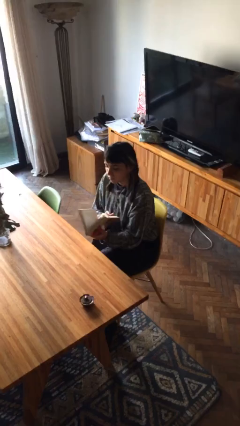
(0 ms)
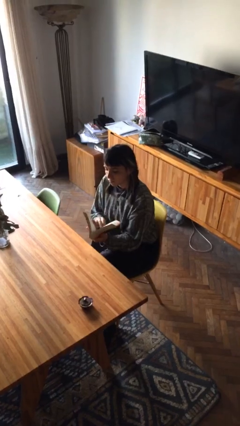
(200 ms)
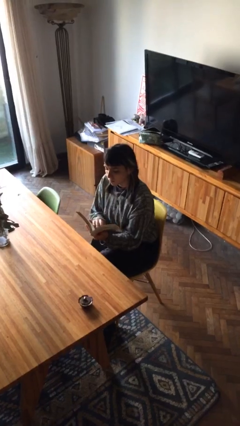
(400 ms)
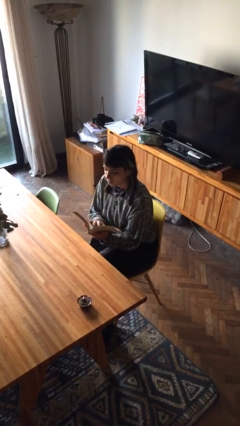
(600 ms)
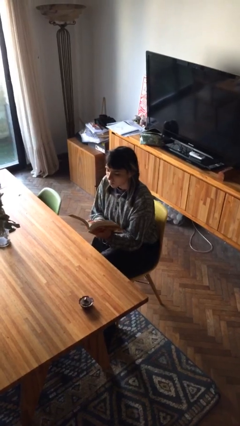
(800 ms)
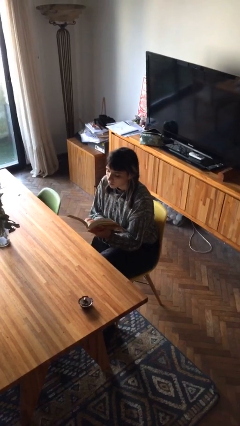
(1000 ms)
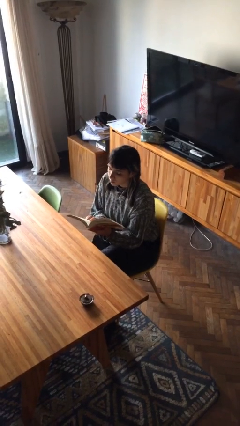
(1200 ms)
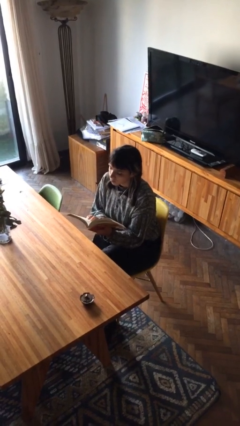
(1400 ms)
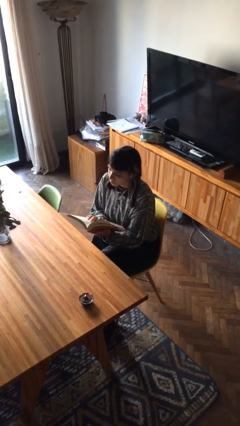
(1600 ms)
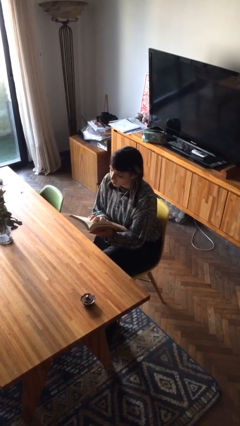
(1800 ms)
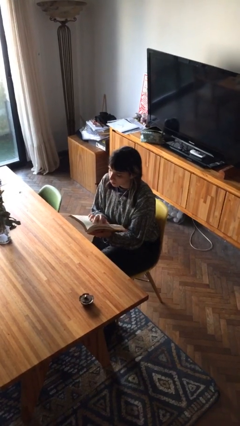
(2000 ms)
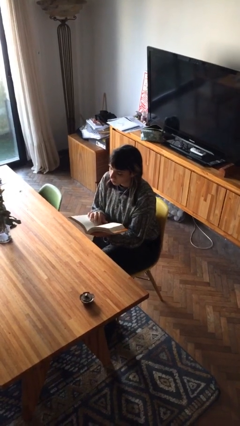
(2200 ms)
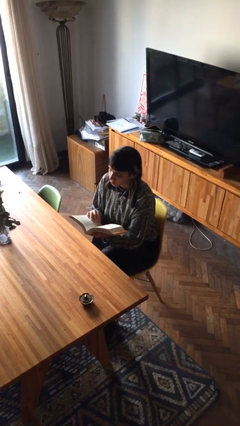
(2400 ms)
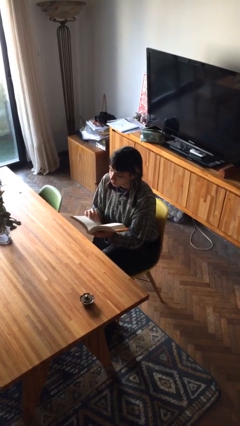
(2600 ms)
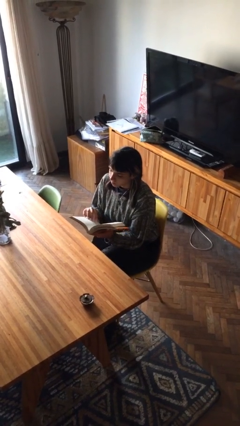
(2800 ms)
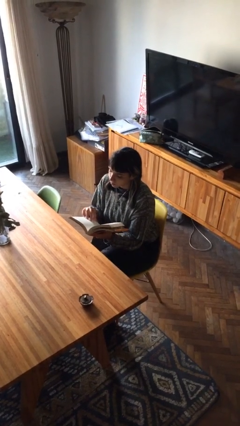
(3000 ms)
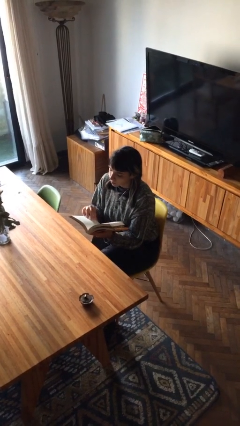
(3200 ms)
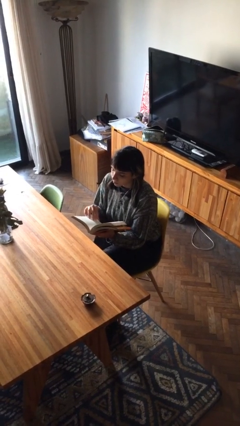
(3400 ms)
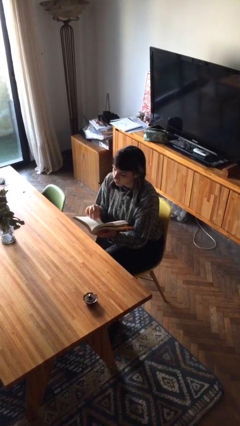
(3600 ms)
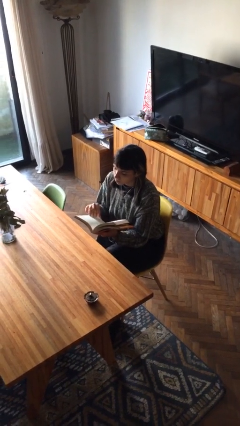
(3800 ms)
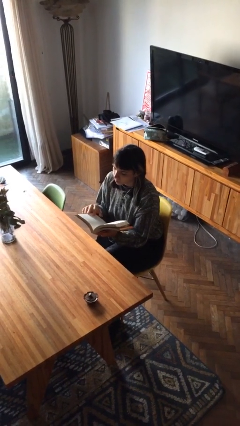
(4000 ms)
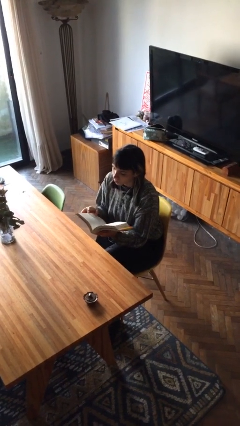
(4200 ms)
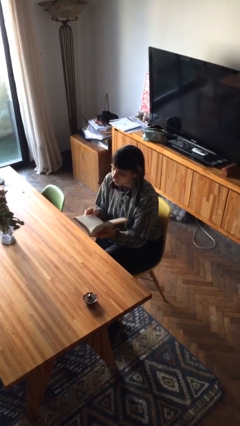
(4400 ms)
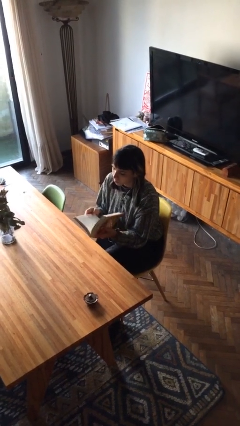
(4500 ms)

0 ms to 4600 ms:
person reads document

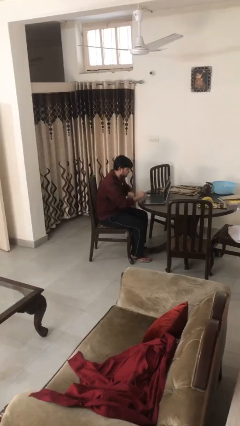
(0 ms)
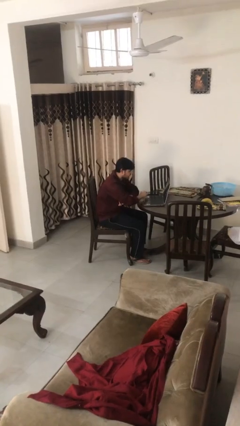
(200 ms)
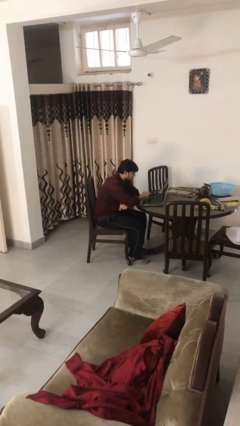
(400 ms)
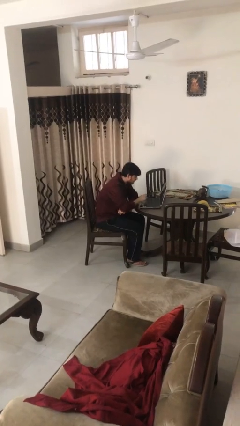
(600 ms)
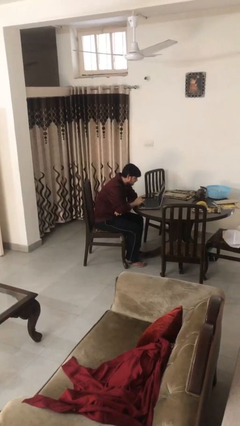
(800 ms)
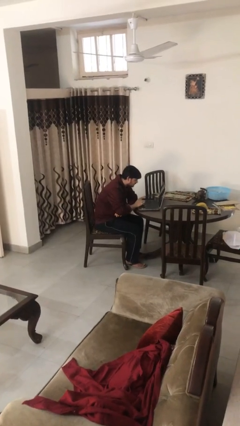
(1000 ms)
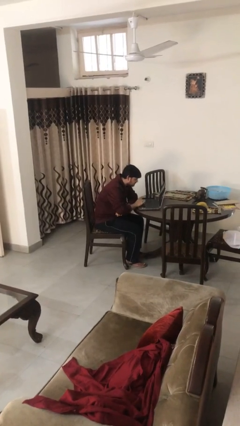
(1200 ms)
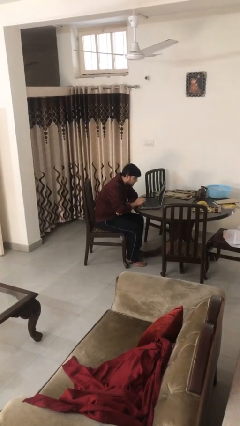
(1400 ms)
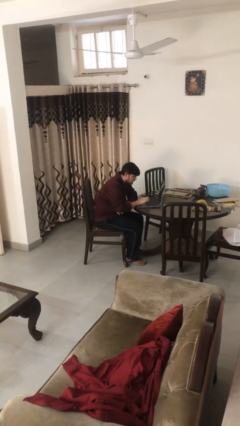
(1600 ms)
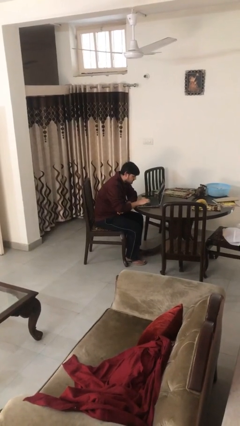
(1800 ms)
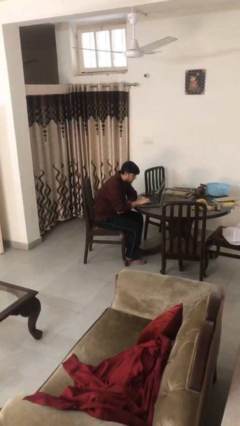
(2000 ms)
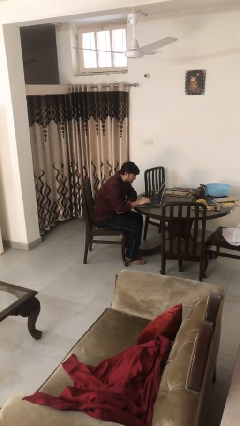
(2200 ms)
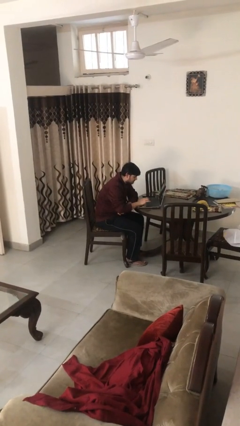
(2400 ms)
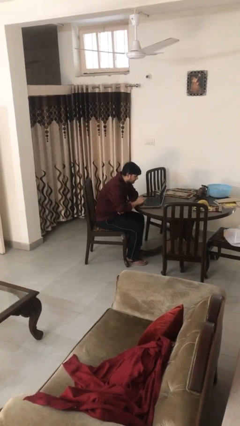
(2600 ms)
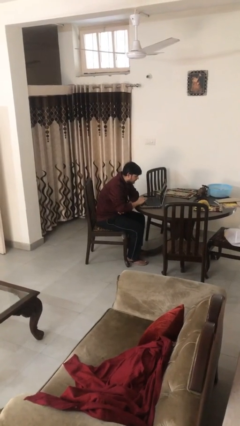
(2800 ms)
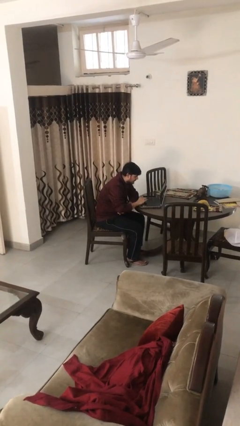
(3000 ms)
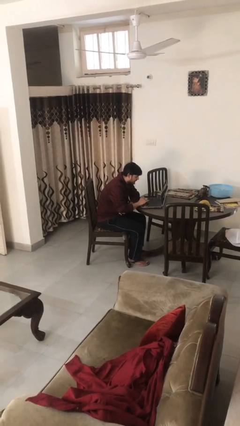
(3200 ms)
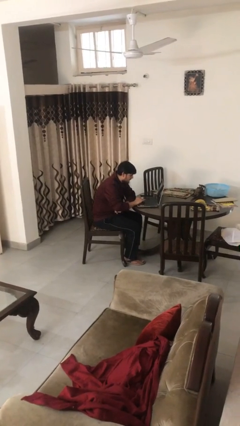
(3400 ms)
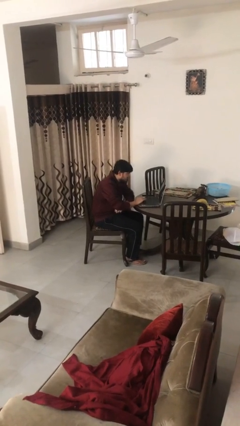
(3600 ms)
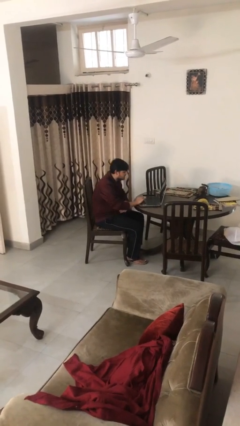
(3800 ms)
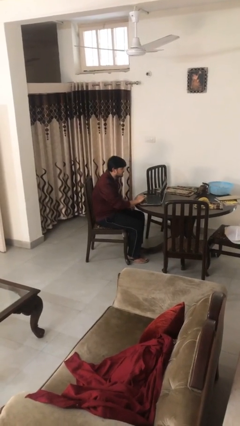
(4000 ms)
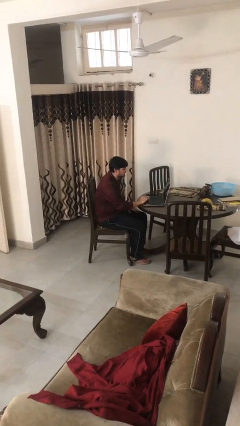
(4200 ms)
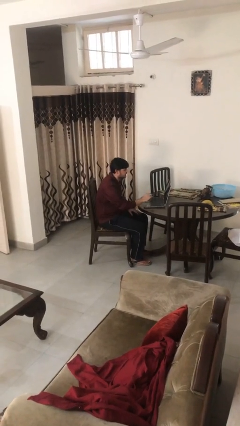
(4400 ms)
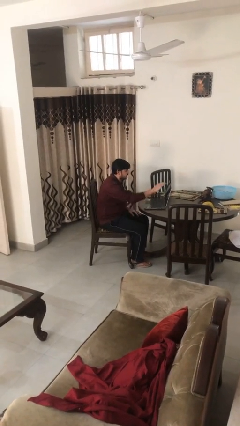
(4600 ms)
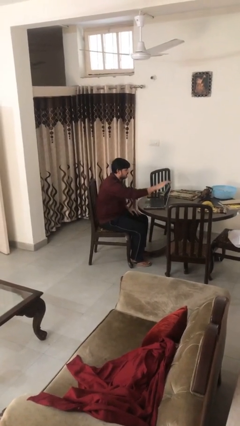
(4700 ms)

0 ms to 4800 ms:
person interacts with laptop

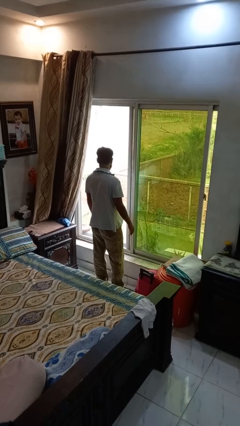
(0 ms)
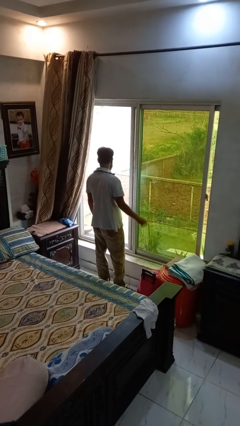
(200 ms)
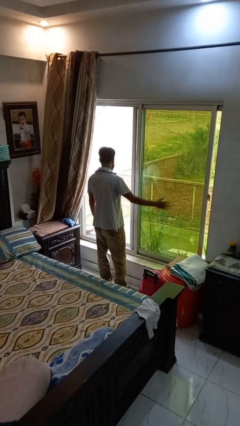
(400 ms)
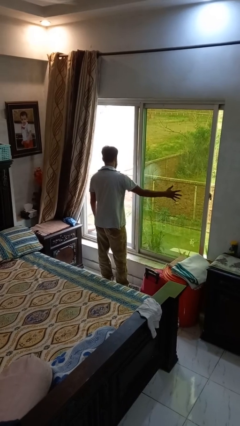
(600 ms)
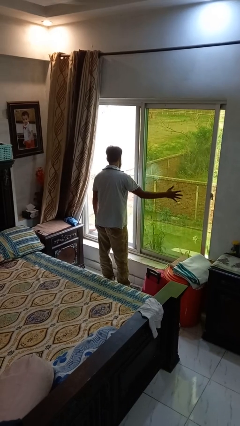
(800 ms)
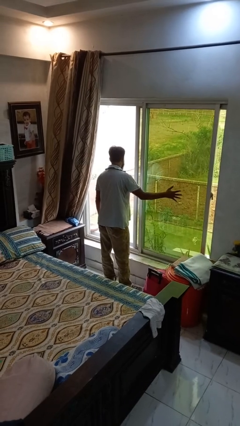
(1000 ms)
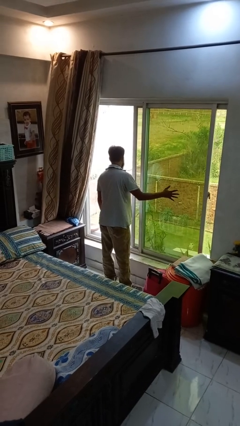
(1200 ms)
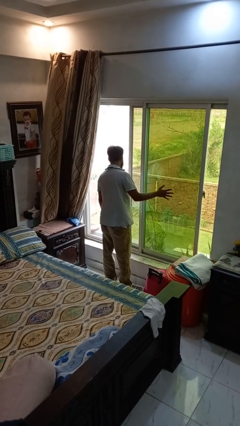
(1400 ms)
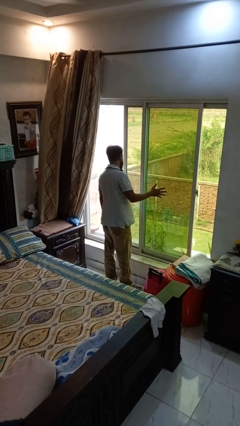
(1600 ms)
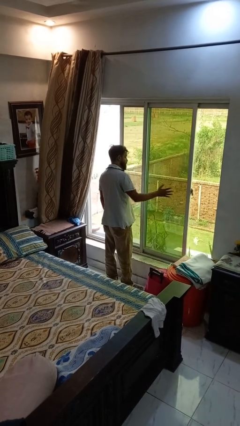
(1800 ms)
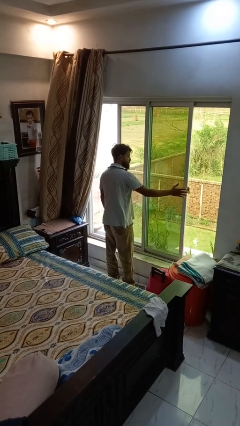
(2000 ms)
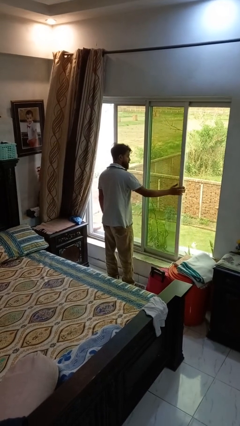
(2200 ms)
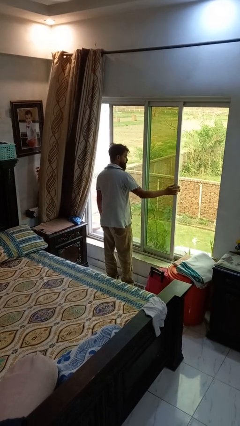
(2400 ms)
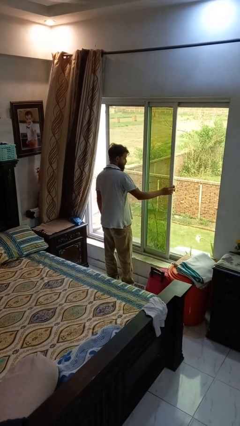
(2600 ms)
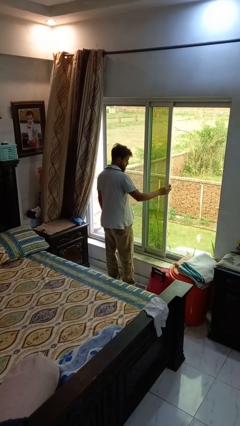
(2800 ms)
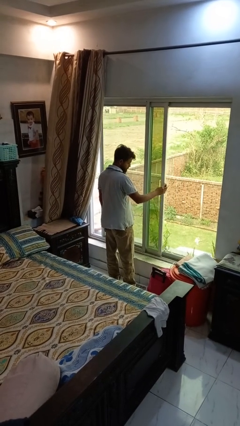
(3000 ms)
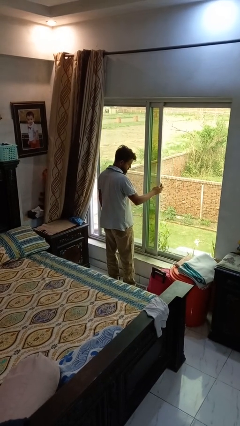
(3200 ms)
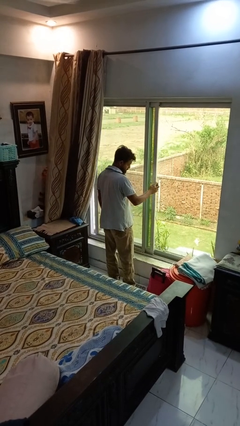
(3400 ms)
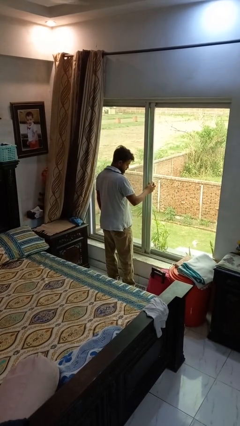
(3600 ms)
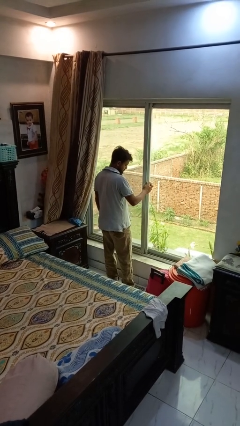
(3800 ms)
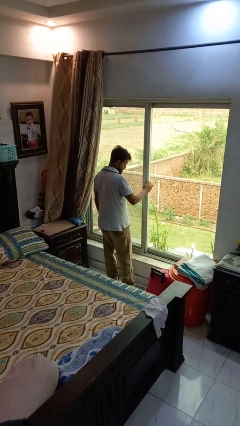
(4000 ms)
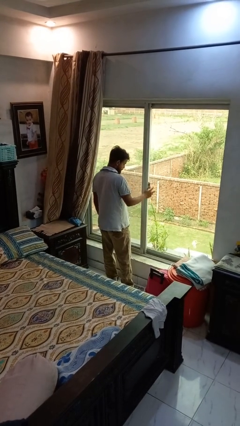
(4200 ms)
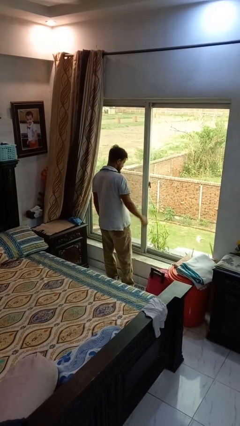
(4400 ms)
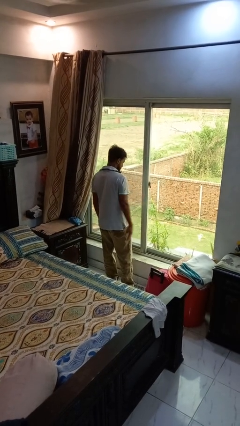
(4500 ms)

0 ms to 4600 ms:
person closes sliding door

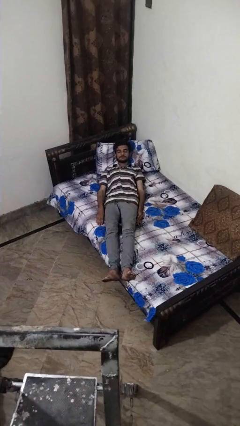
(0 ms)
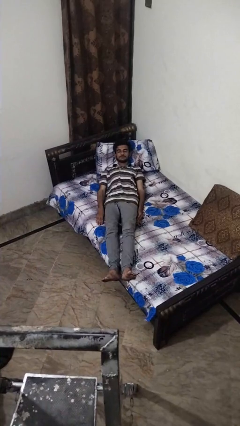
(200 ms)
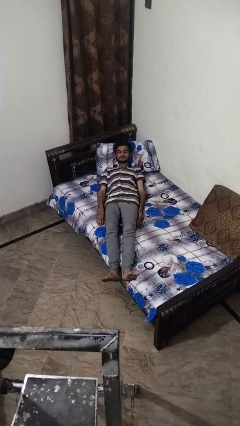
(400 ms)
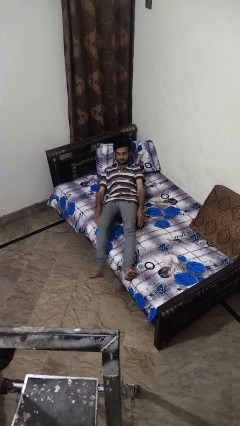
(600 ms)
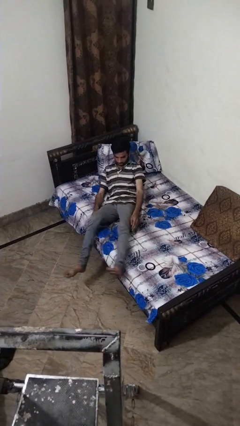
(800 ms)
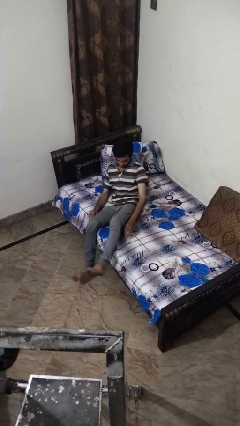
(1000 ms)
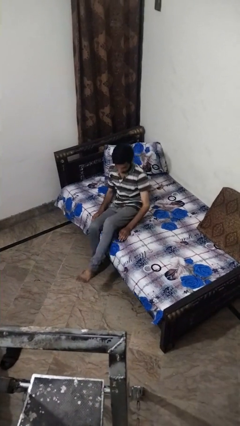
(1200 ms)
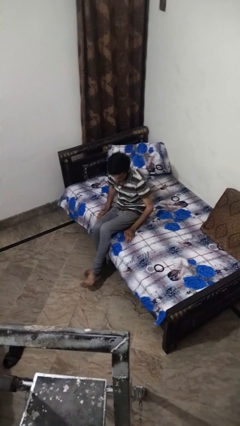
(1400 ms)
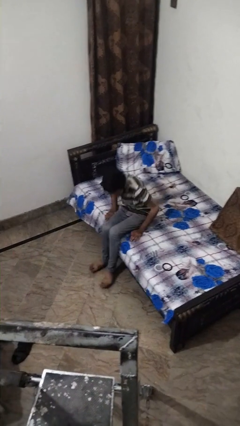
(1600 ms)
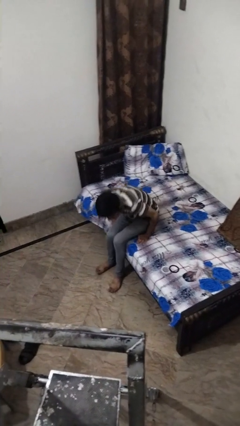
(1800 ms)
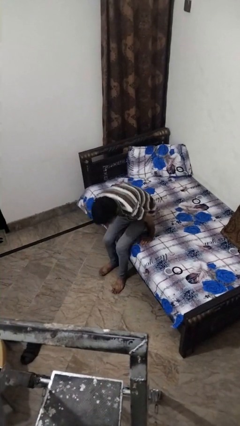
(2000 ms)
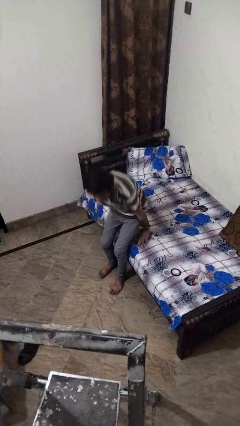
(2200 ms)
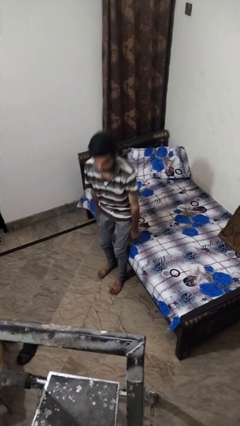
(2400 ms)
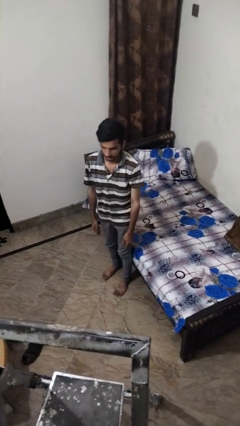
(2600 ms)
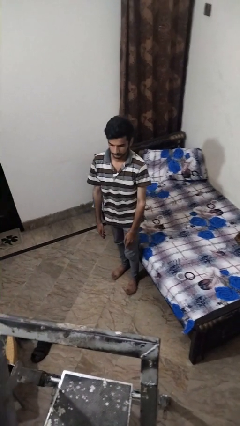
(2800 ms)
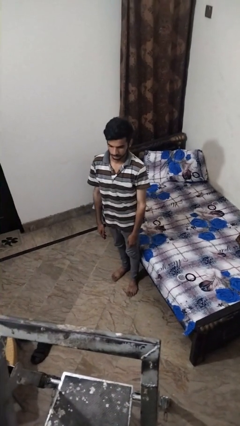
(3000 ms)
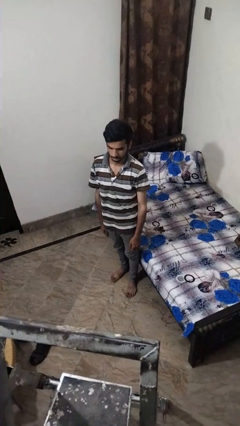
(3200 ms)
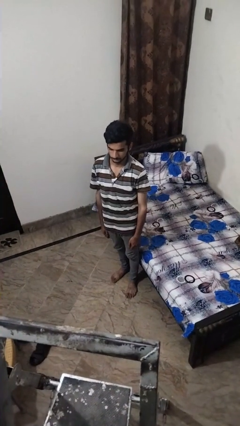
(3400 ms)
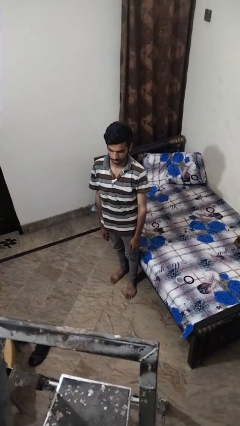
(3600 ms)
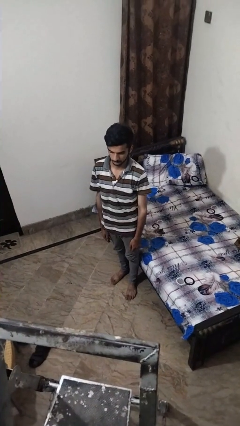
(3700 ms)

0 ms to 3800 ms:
person stands up

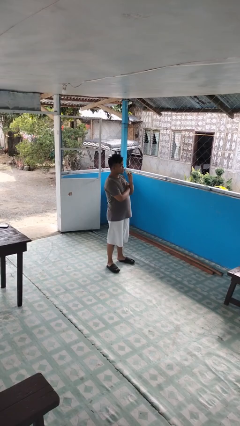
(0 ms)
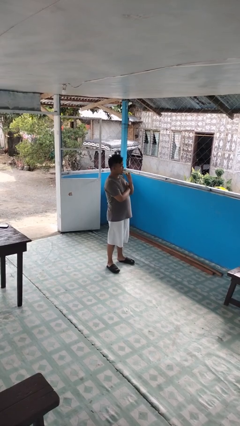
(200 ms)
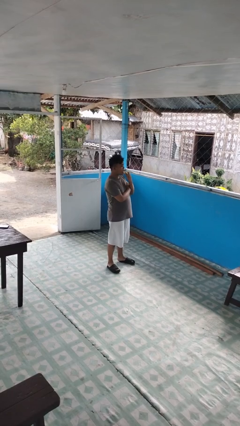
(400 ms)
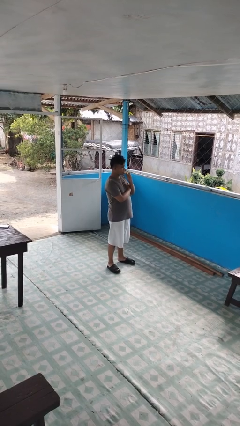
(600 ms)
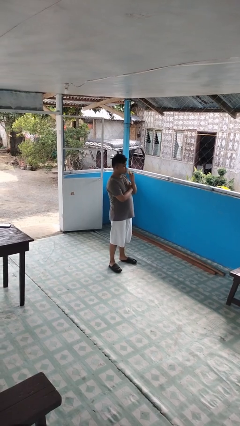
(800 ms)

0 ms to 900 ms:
person eats banana
